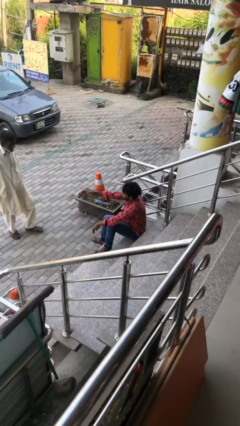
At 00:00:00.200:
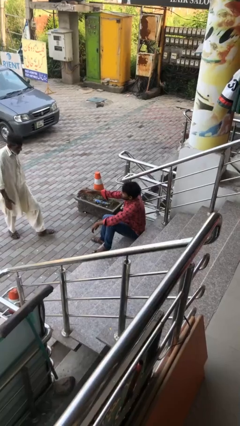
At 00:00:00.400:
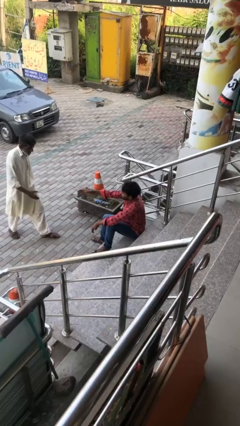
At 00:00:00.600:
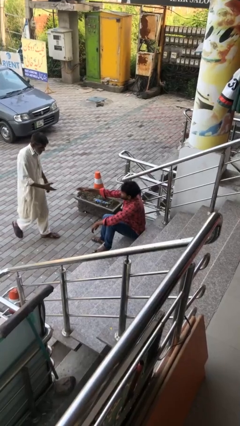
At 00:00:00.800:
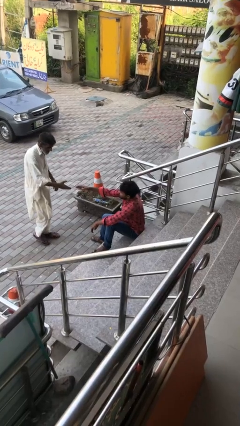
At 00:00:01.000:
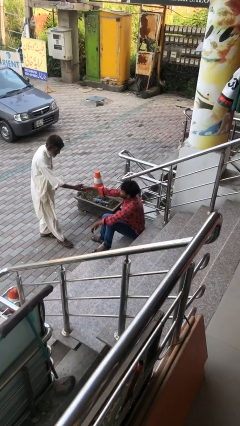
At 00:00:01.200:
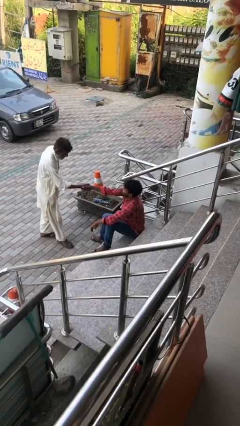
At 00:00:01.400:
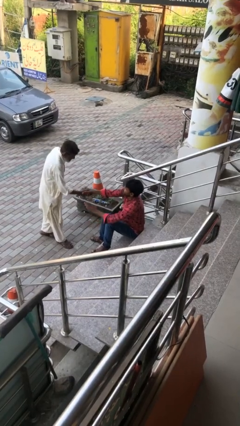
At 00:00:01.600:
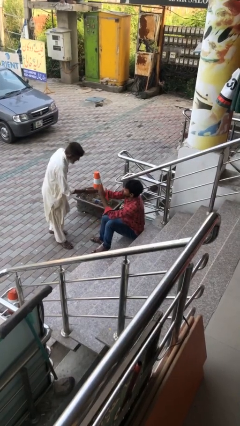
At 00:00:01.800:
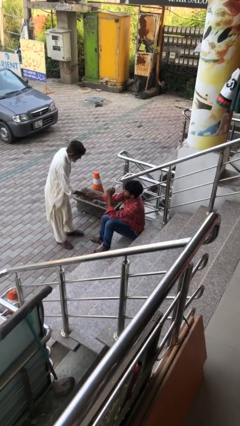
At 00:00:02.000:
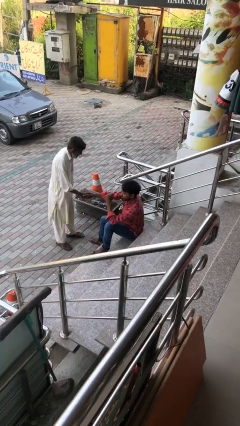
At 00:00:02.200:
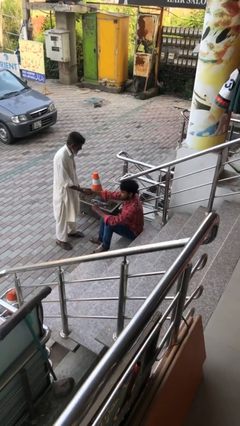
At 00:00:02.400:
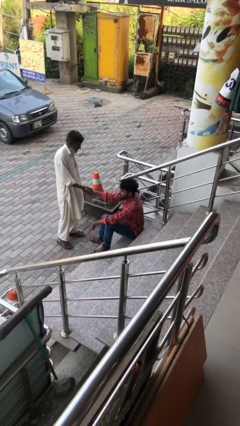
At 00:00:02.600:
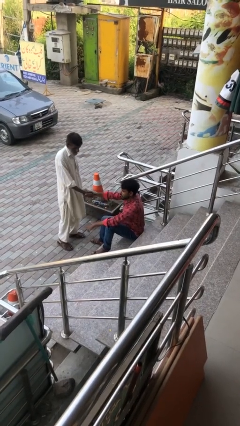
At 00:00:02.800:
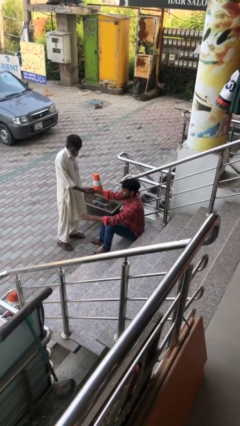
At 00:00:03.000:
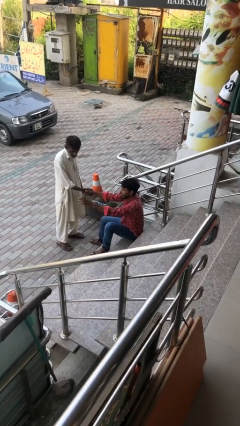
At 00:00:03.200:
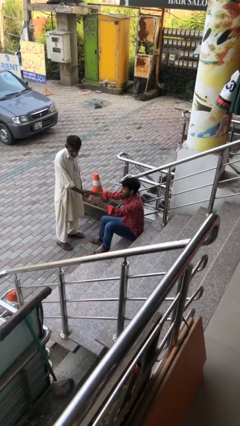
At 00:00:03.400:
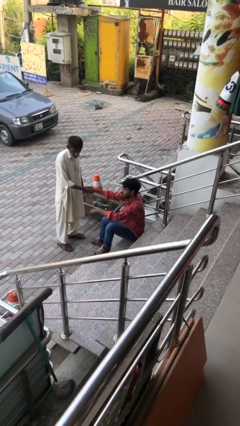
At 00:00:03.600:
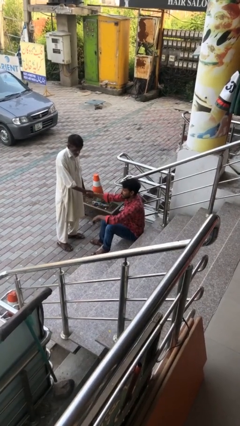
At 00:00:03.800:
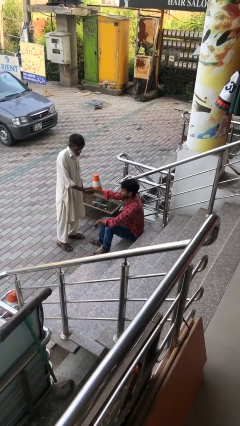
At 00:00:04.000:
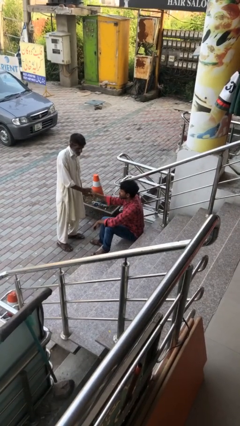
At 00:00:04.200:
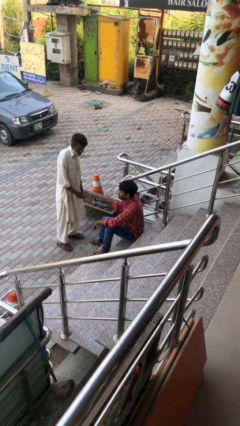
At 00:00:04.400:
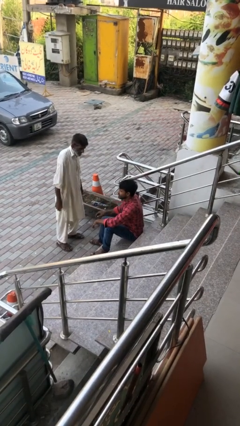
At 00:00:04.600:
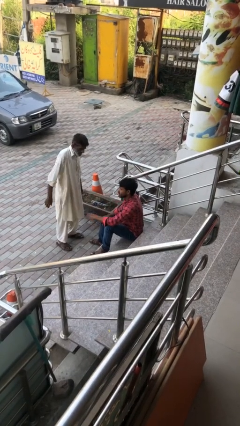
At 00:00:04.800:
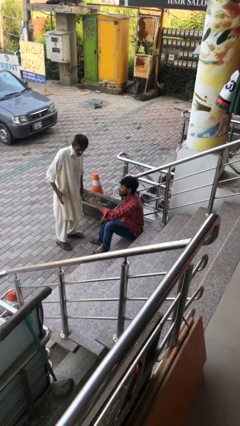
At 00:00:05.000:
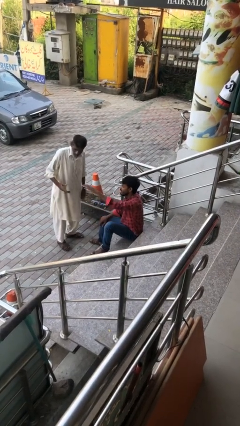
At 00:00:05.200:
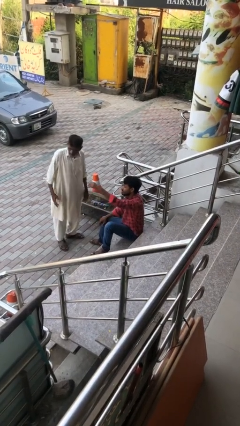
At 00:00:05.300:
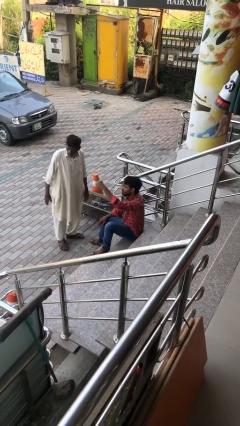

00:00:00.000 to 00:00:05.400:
person shakes hand

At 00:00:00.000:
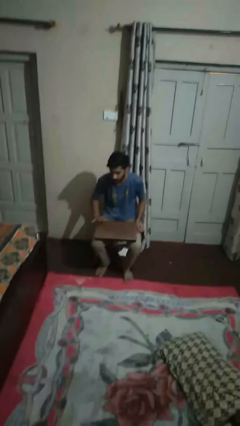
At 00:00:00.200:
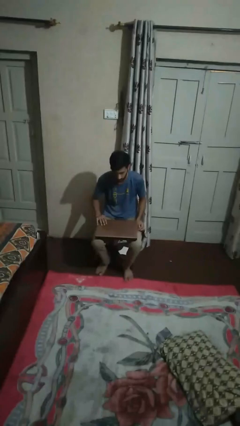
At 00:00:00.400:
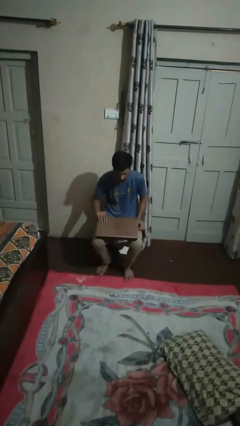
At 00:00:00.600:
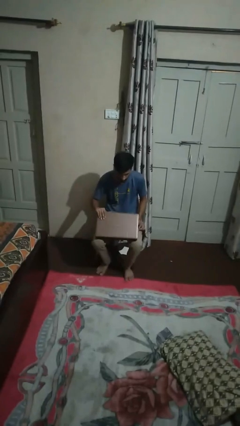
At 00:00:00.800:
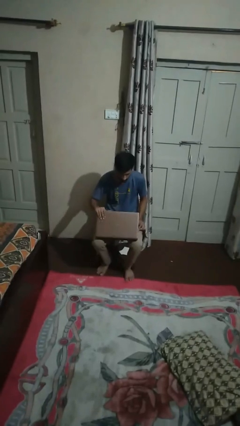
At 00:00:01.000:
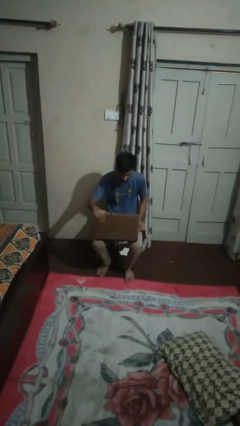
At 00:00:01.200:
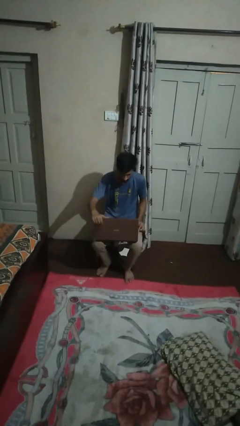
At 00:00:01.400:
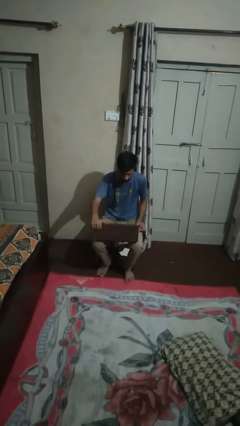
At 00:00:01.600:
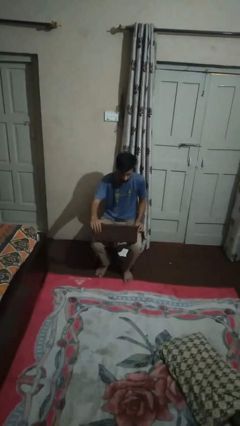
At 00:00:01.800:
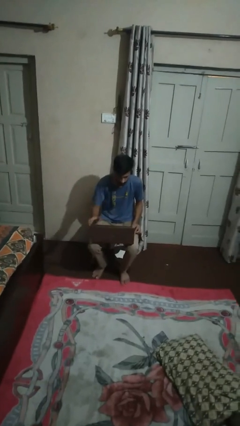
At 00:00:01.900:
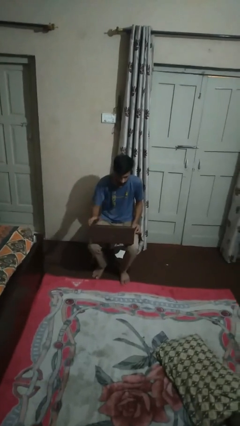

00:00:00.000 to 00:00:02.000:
person opens laptop

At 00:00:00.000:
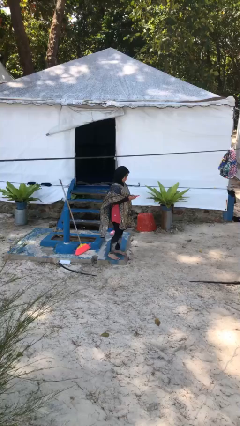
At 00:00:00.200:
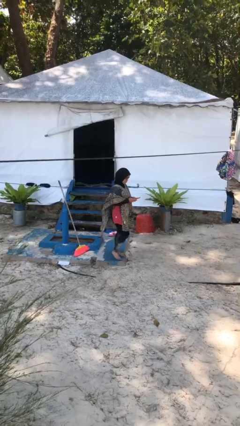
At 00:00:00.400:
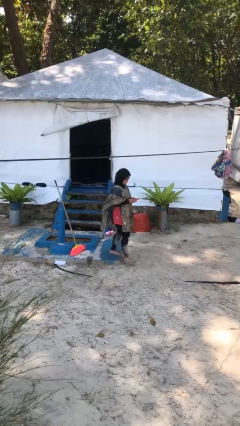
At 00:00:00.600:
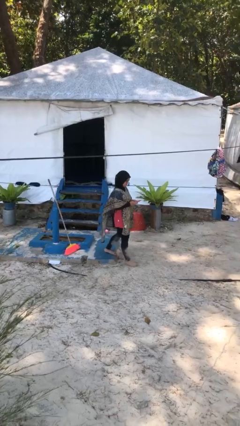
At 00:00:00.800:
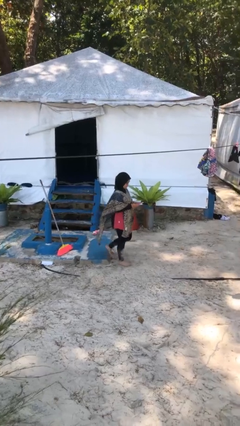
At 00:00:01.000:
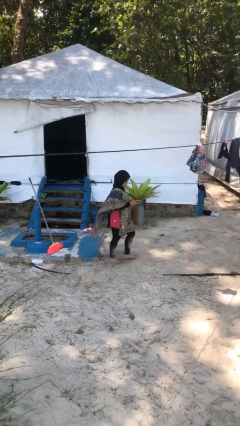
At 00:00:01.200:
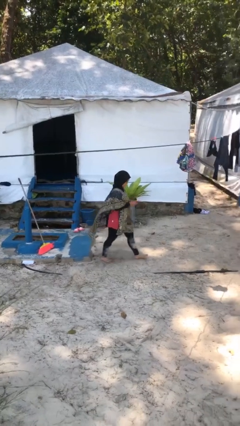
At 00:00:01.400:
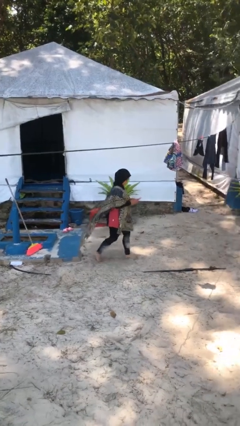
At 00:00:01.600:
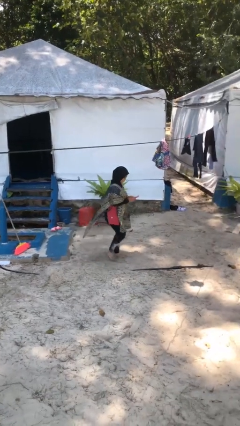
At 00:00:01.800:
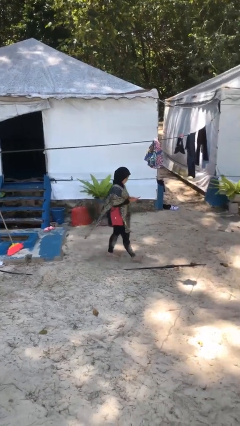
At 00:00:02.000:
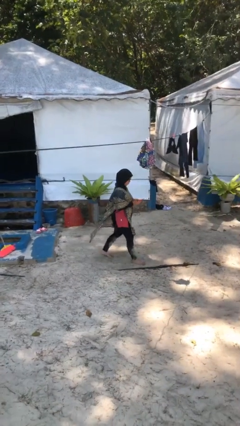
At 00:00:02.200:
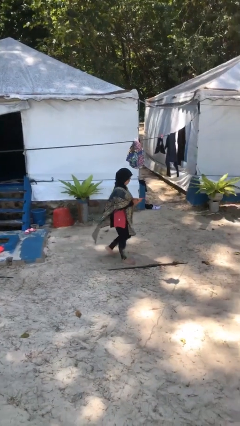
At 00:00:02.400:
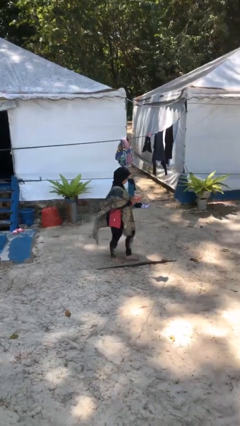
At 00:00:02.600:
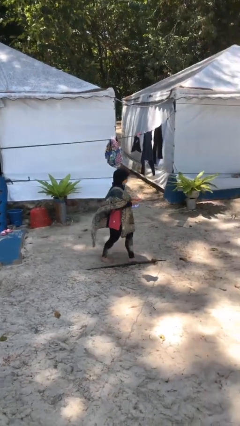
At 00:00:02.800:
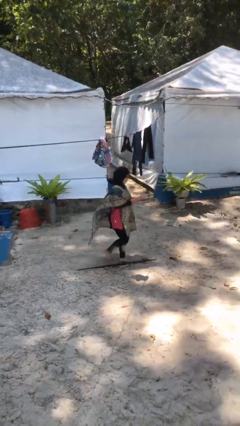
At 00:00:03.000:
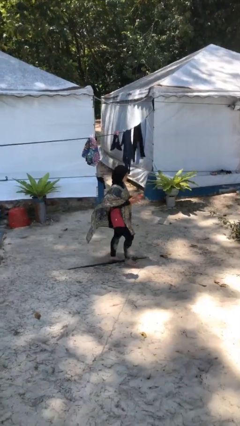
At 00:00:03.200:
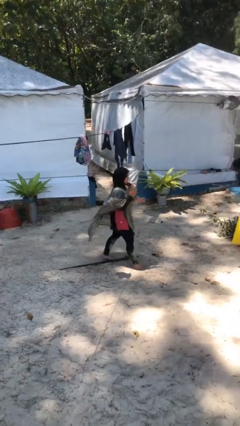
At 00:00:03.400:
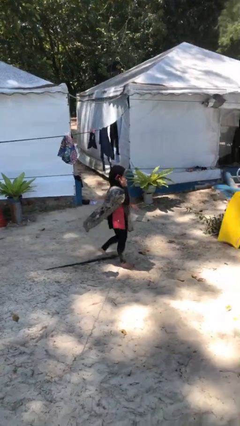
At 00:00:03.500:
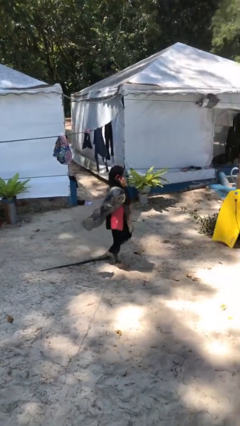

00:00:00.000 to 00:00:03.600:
person texts on phone

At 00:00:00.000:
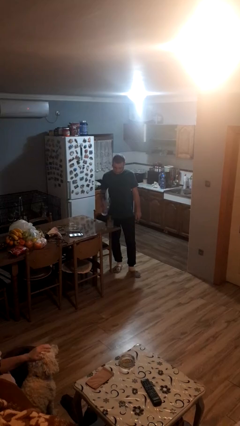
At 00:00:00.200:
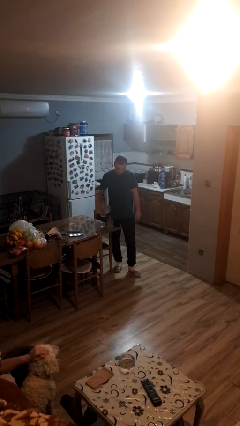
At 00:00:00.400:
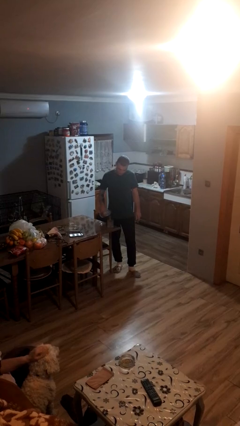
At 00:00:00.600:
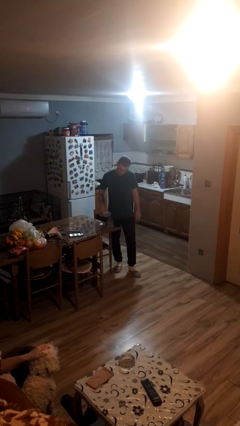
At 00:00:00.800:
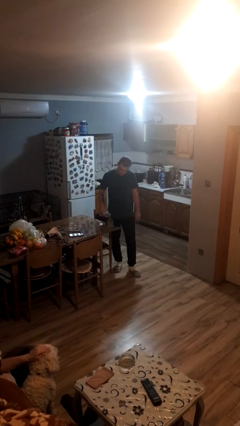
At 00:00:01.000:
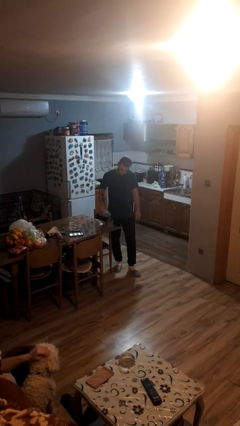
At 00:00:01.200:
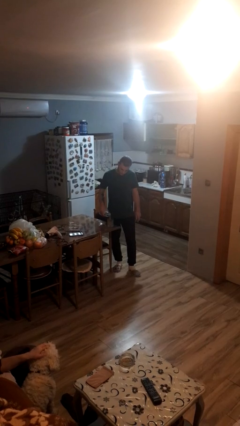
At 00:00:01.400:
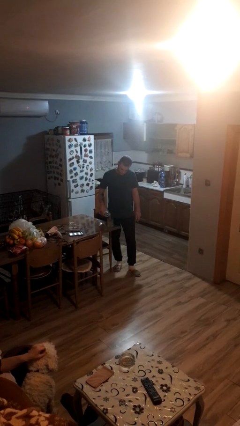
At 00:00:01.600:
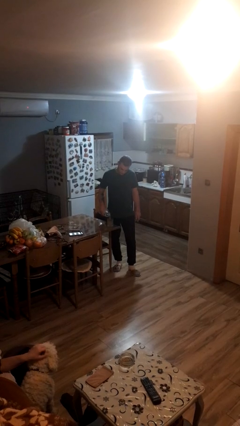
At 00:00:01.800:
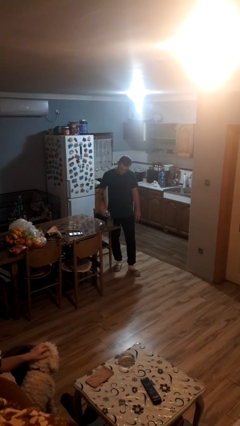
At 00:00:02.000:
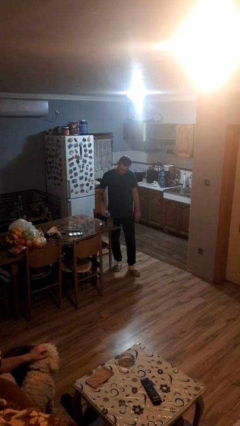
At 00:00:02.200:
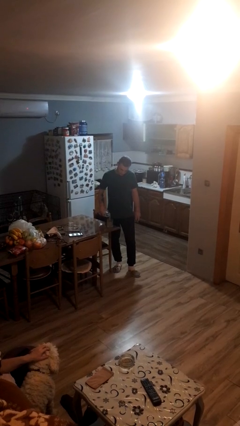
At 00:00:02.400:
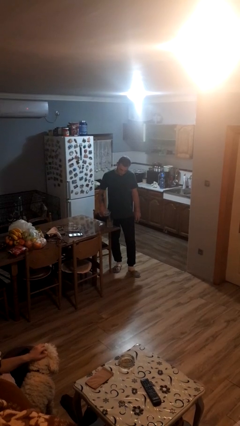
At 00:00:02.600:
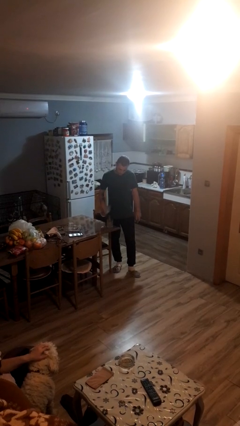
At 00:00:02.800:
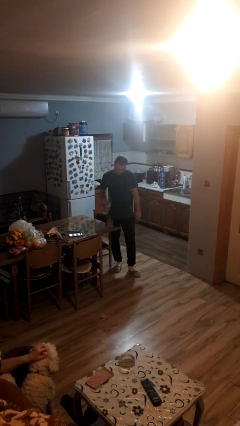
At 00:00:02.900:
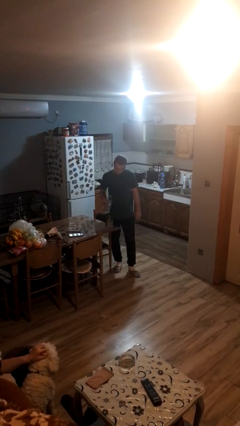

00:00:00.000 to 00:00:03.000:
person pours liquid into cup

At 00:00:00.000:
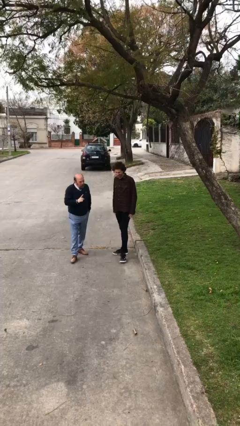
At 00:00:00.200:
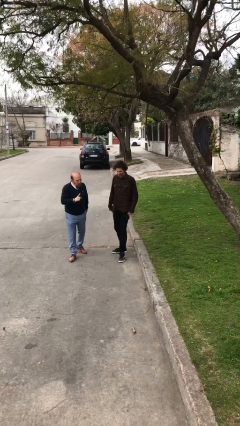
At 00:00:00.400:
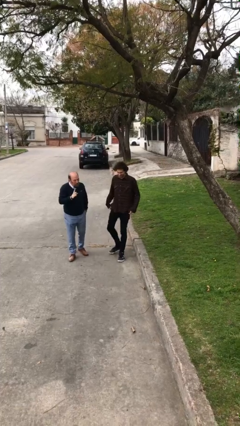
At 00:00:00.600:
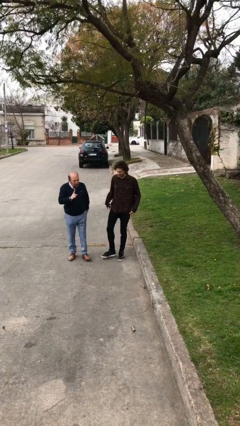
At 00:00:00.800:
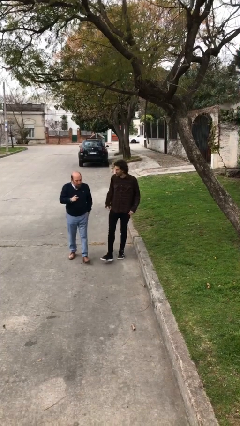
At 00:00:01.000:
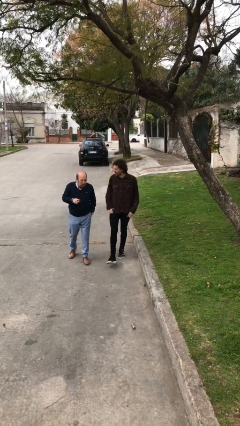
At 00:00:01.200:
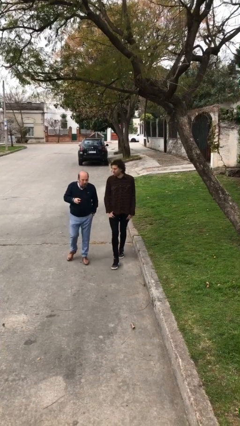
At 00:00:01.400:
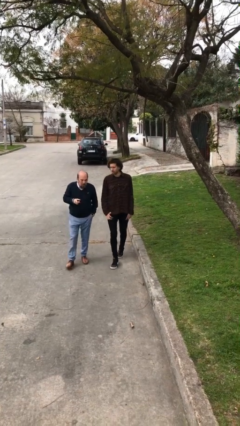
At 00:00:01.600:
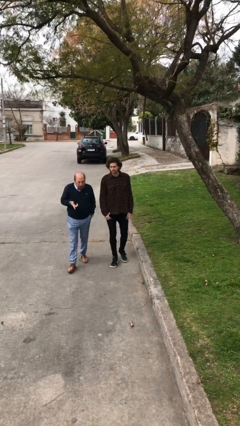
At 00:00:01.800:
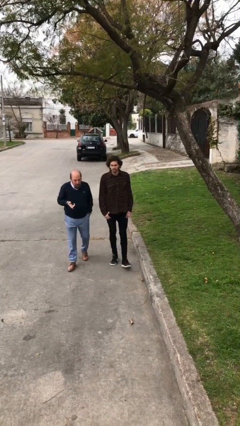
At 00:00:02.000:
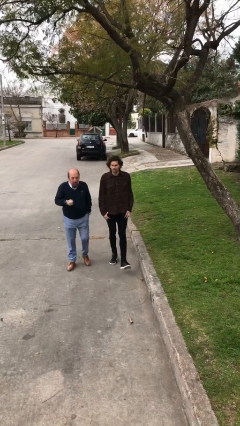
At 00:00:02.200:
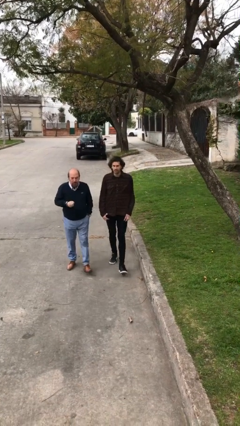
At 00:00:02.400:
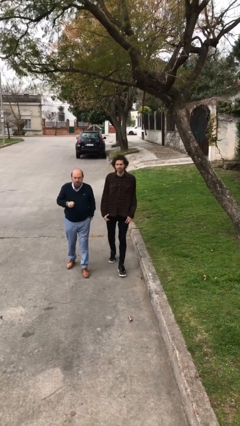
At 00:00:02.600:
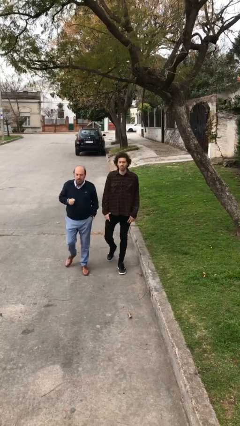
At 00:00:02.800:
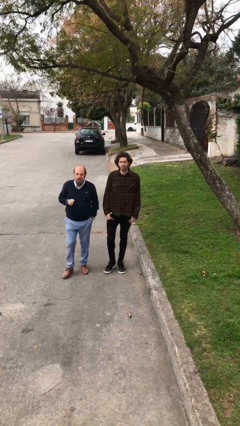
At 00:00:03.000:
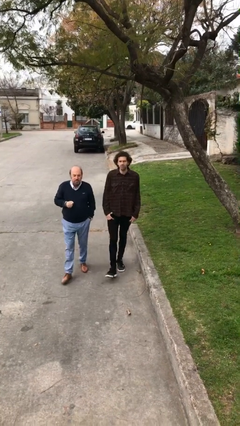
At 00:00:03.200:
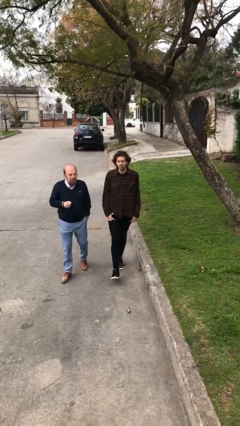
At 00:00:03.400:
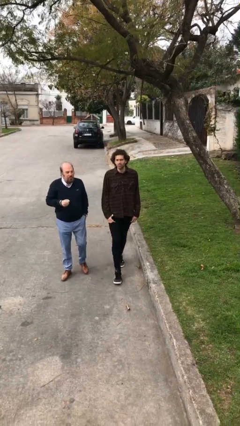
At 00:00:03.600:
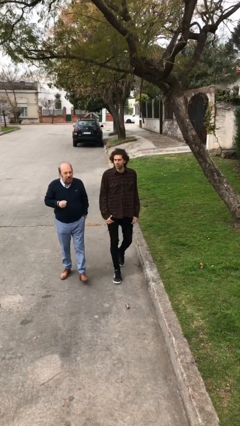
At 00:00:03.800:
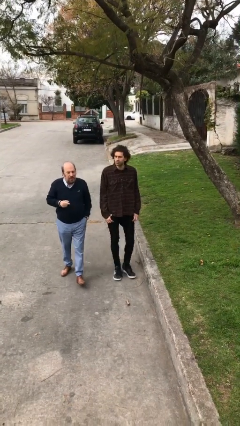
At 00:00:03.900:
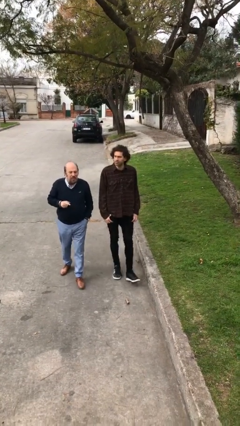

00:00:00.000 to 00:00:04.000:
person talks to person
